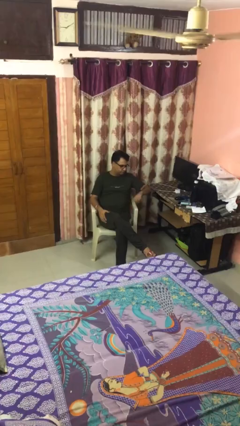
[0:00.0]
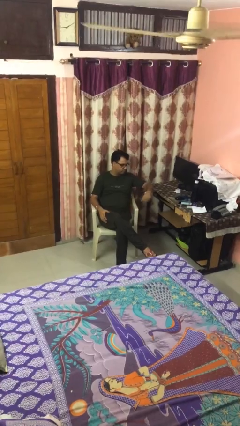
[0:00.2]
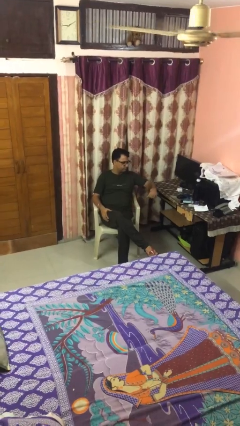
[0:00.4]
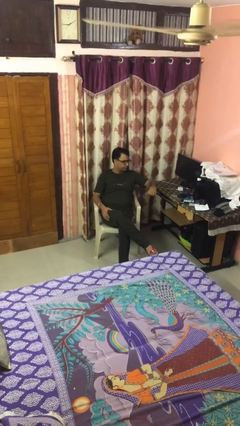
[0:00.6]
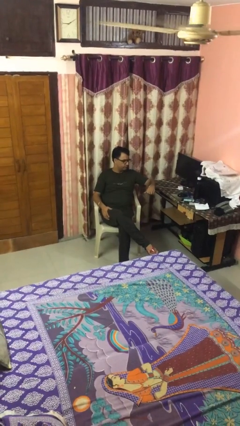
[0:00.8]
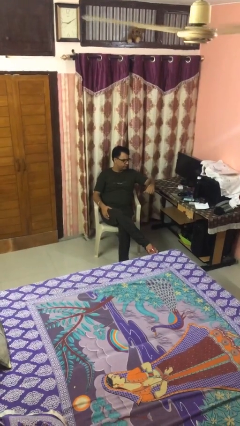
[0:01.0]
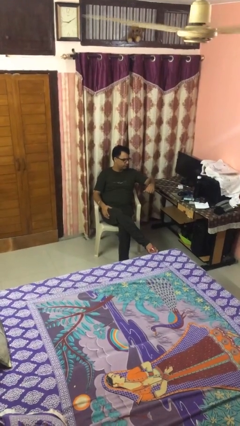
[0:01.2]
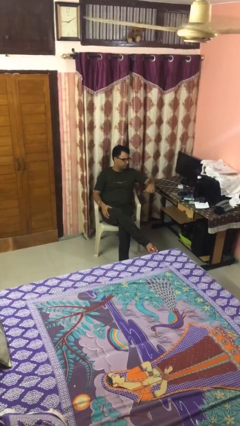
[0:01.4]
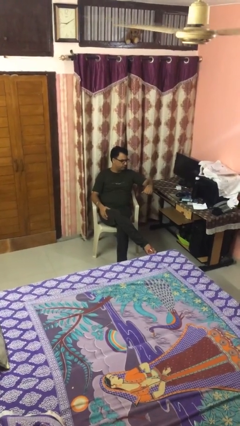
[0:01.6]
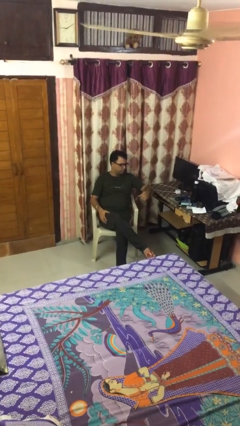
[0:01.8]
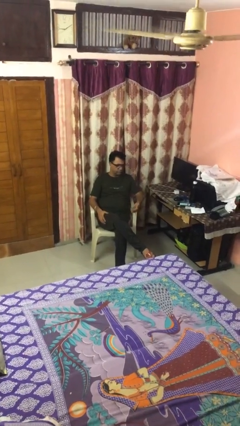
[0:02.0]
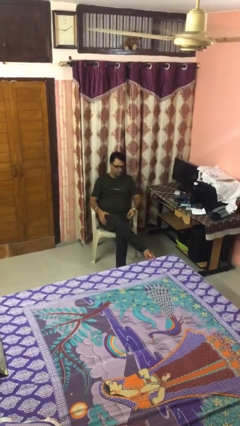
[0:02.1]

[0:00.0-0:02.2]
person looks at wristwatch

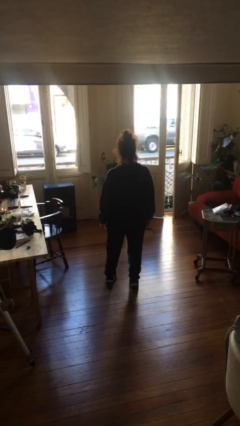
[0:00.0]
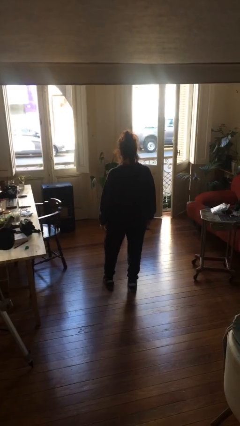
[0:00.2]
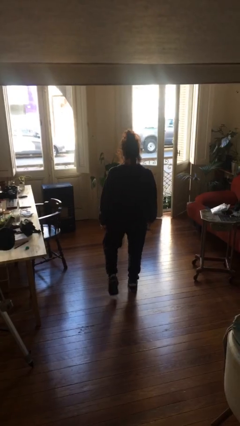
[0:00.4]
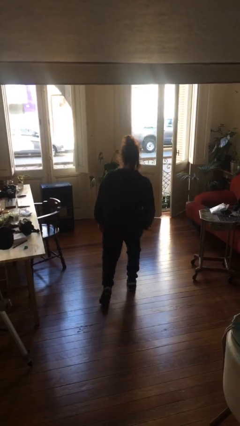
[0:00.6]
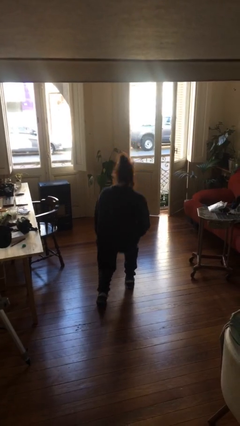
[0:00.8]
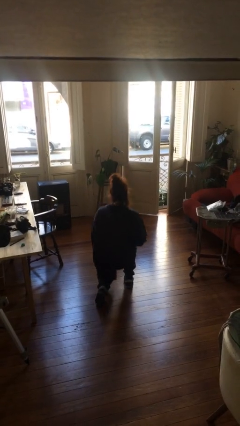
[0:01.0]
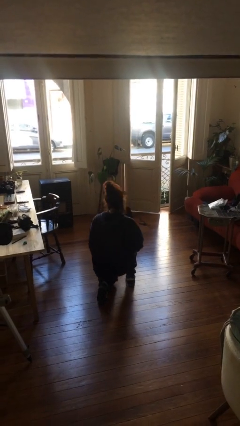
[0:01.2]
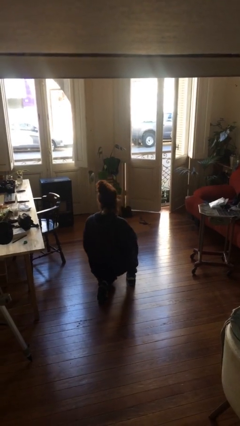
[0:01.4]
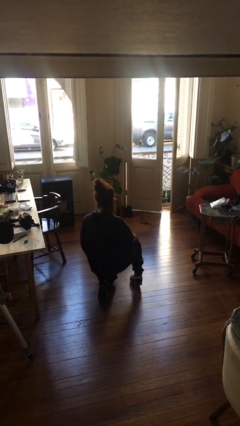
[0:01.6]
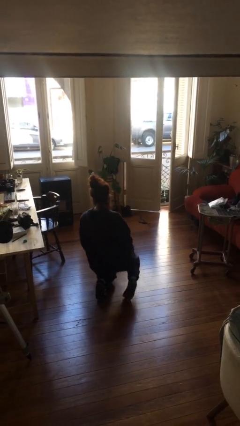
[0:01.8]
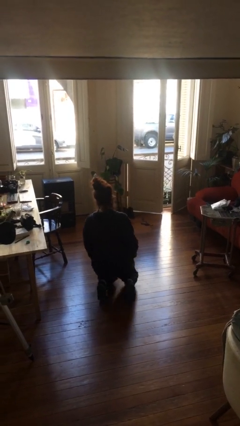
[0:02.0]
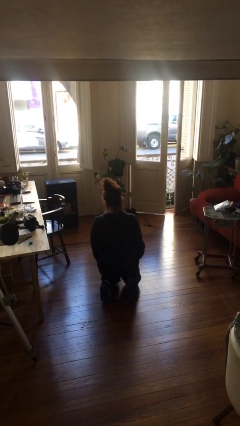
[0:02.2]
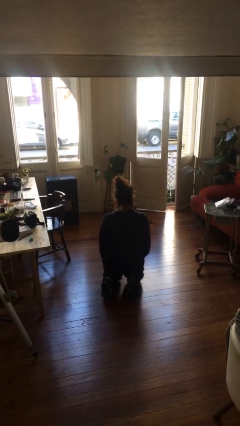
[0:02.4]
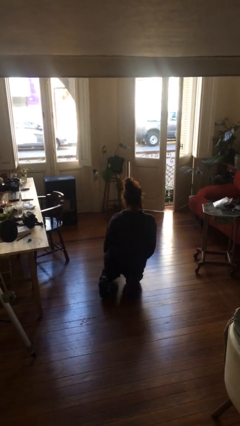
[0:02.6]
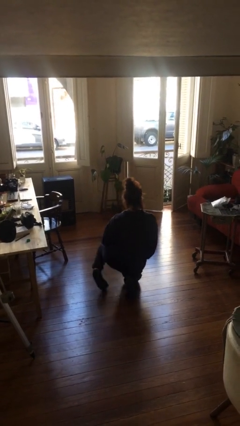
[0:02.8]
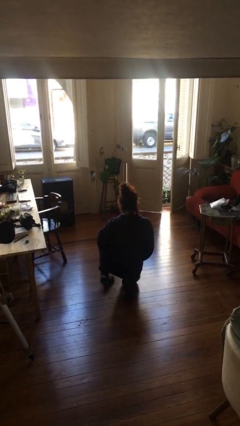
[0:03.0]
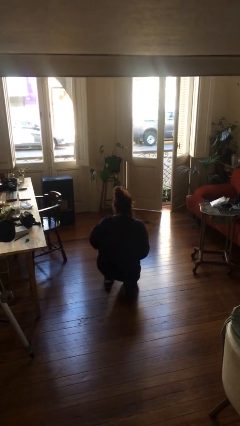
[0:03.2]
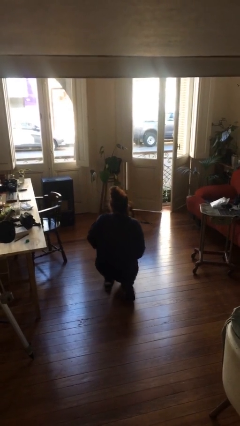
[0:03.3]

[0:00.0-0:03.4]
person kneels

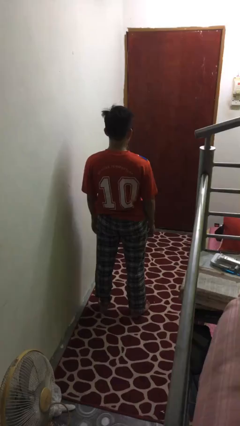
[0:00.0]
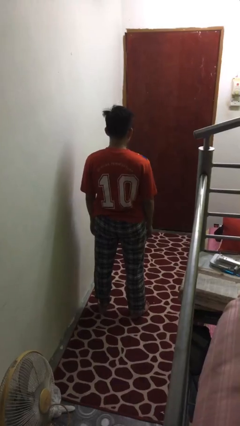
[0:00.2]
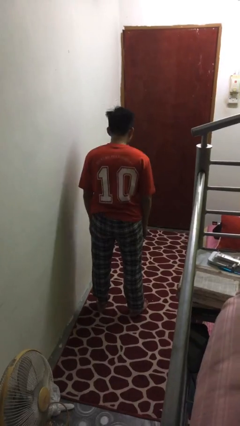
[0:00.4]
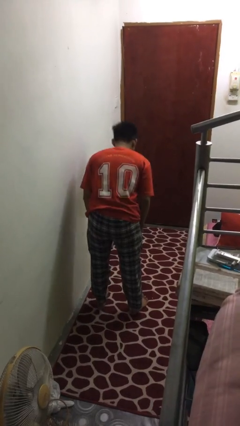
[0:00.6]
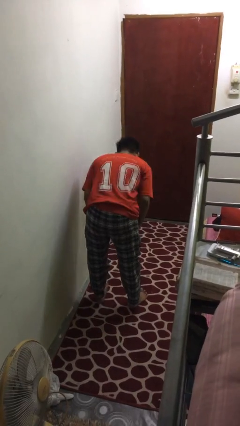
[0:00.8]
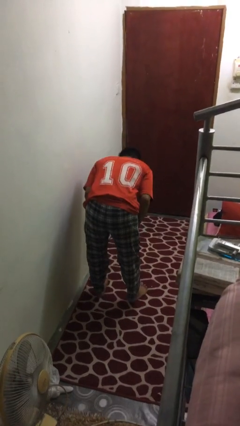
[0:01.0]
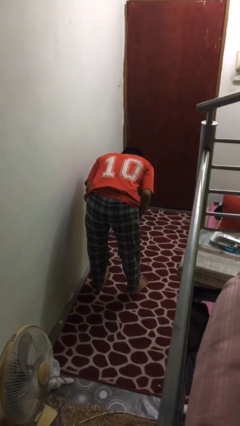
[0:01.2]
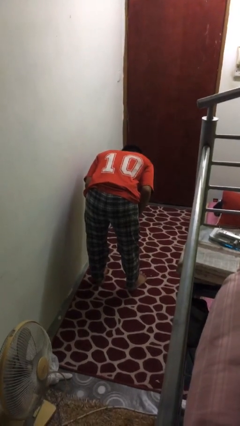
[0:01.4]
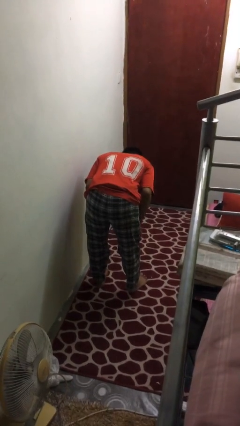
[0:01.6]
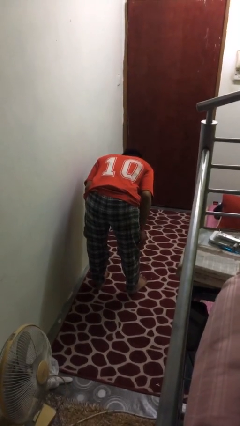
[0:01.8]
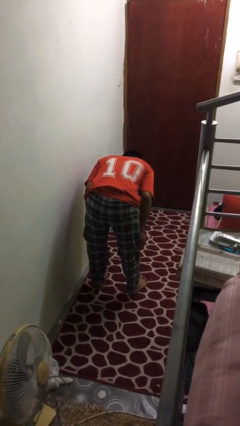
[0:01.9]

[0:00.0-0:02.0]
person bows

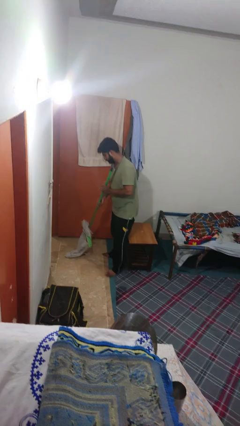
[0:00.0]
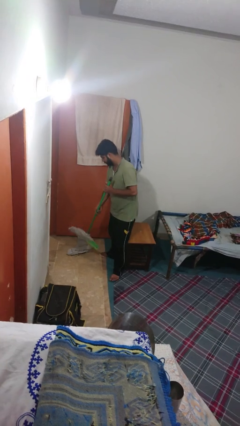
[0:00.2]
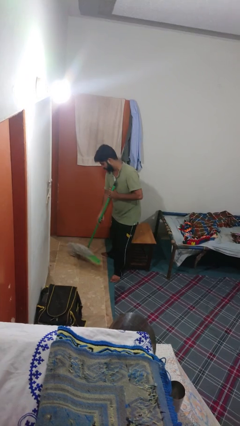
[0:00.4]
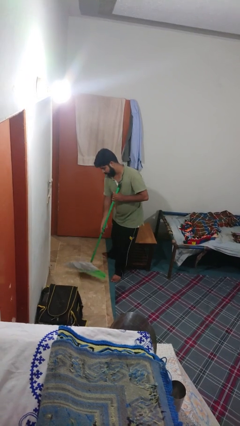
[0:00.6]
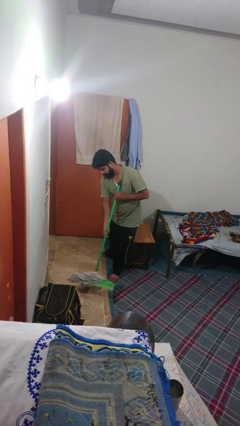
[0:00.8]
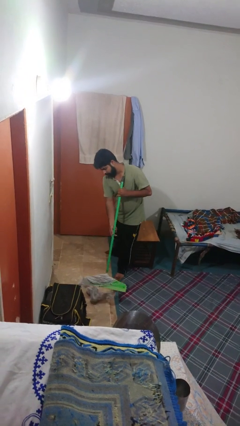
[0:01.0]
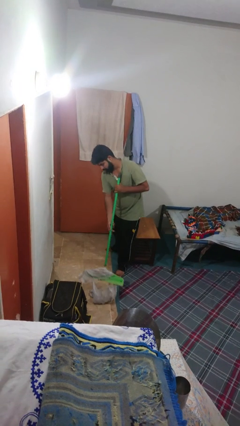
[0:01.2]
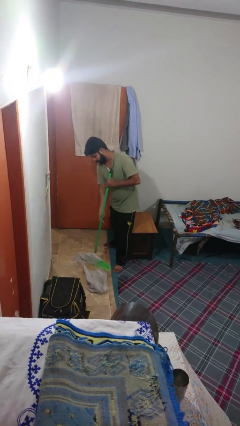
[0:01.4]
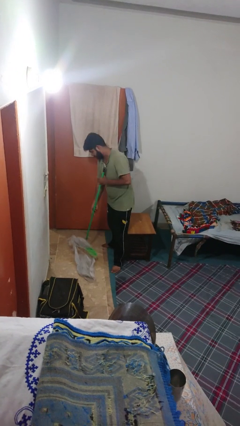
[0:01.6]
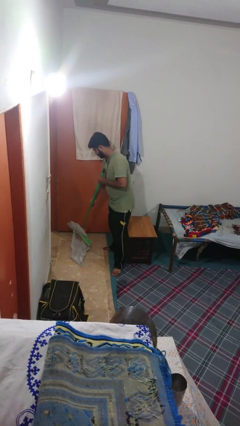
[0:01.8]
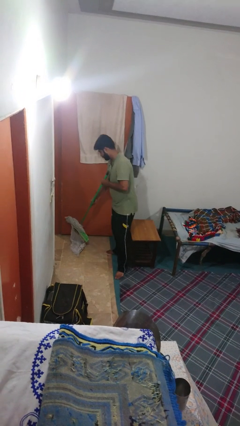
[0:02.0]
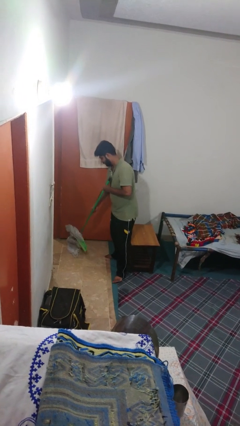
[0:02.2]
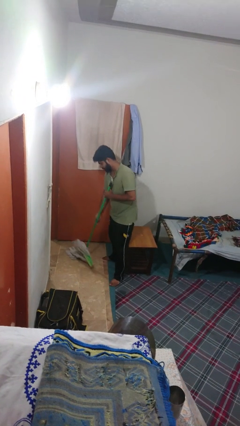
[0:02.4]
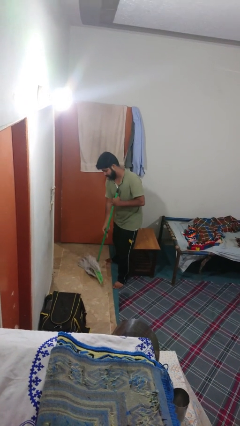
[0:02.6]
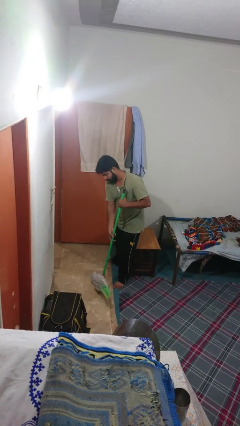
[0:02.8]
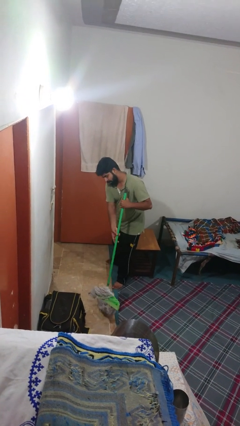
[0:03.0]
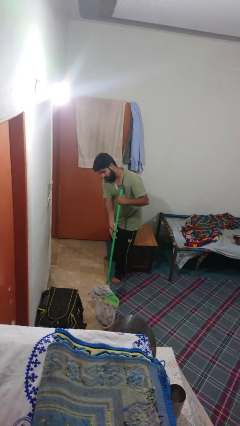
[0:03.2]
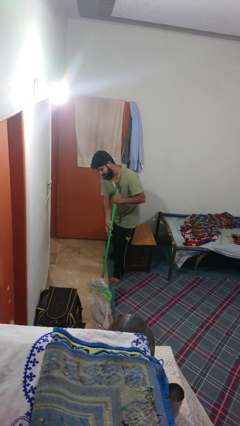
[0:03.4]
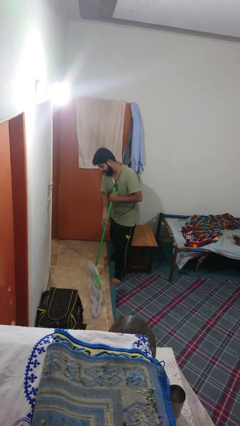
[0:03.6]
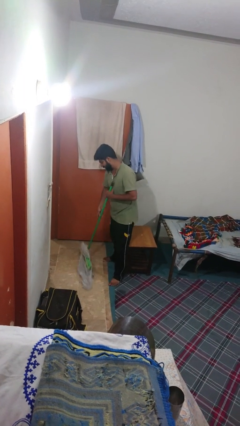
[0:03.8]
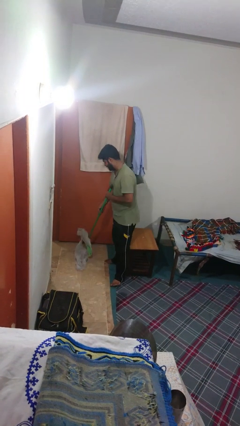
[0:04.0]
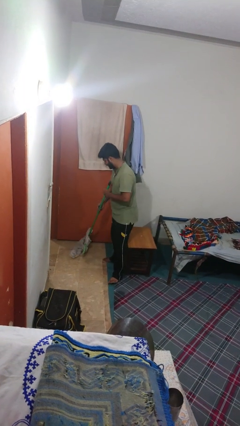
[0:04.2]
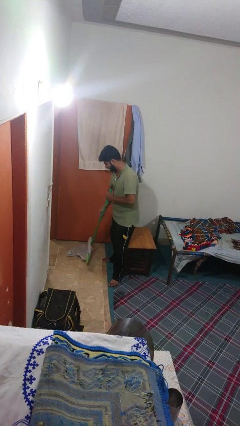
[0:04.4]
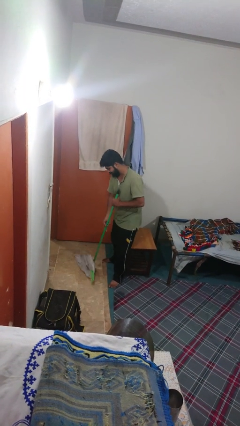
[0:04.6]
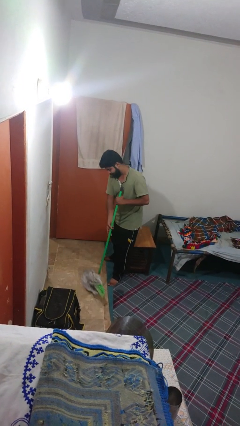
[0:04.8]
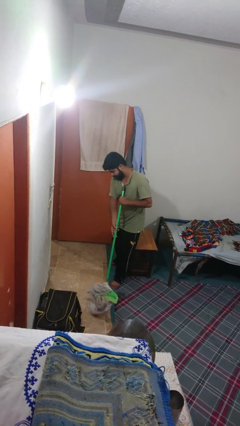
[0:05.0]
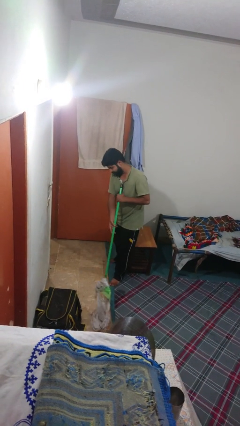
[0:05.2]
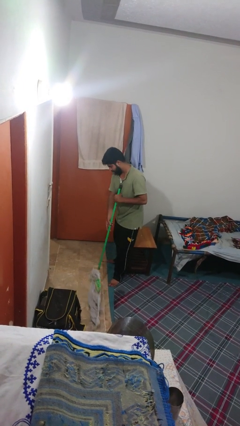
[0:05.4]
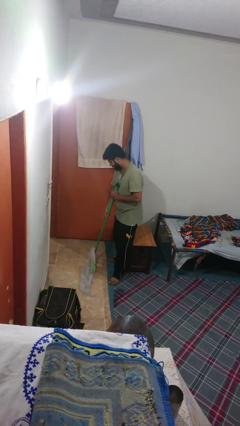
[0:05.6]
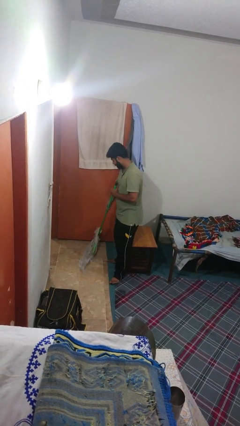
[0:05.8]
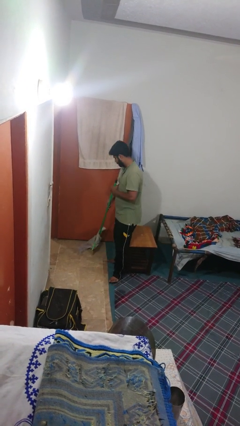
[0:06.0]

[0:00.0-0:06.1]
person mops

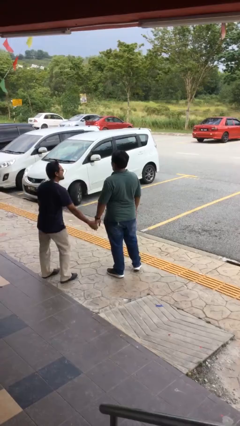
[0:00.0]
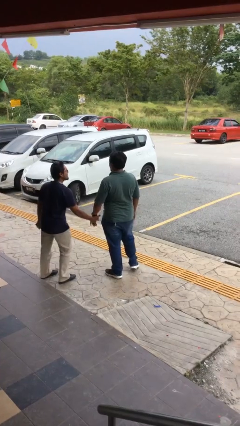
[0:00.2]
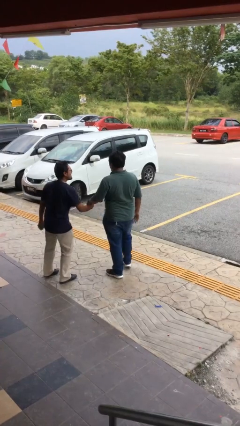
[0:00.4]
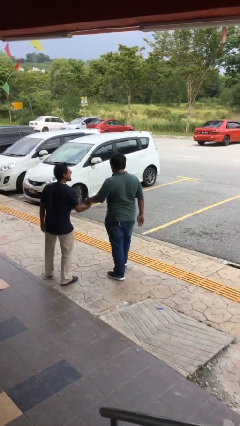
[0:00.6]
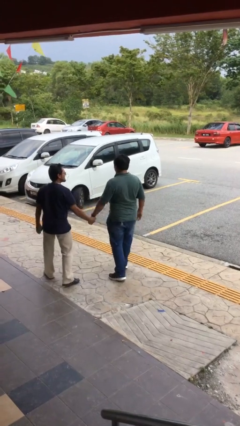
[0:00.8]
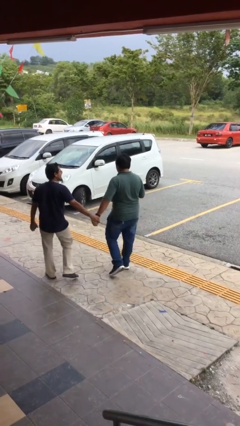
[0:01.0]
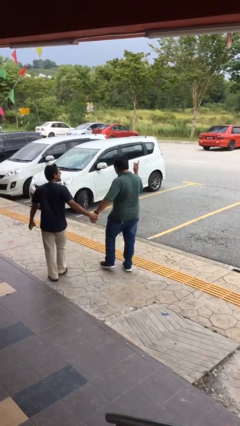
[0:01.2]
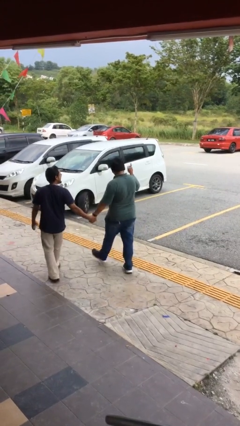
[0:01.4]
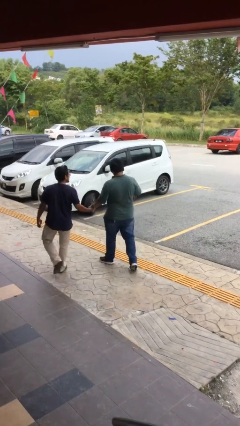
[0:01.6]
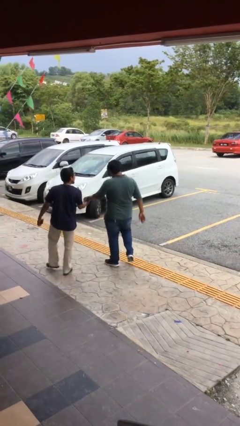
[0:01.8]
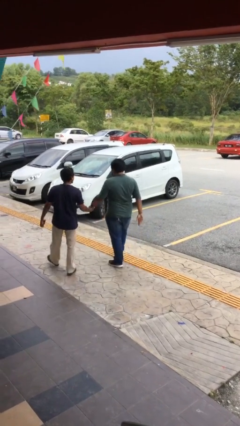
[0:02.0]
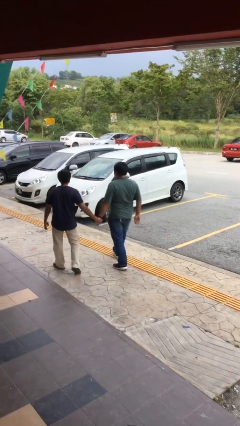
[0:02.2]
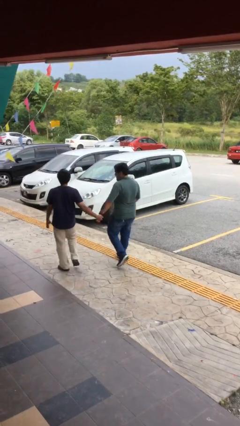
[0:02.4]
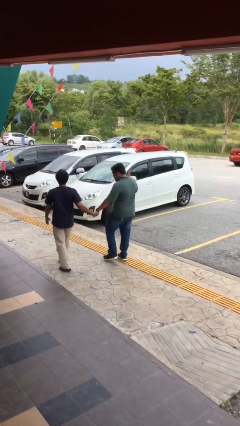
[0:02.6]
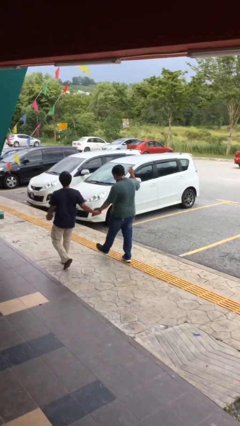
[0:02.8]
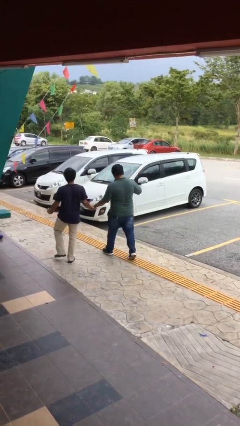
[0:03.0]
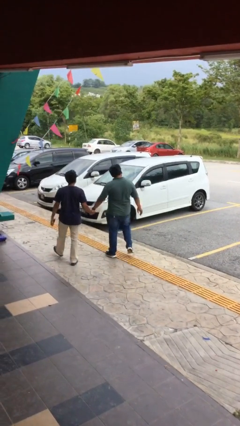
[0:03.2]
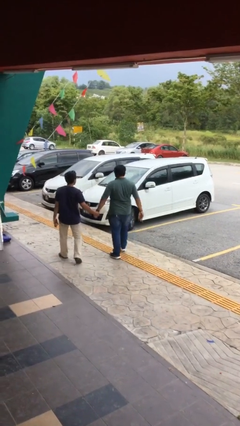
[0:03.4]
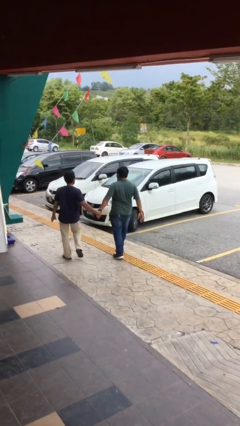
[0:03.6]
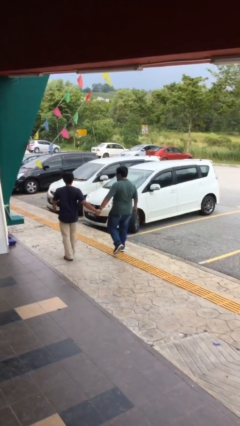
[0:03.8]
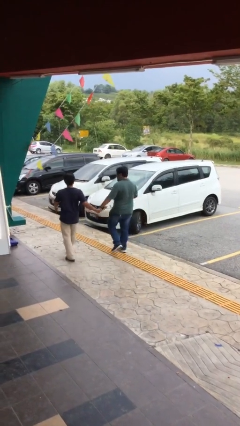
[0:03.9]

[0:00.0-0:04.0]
person holds hand
